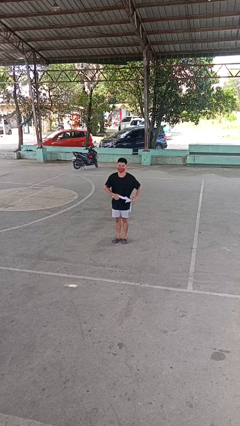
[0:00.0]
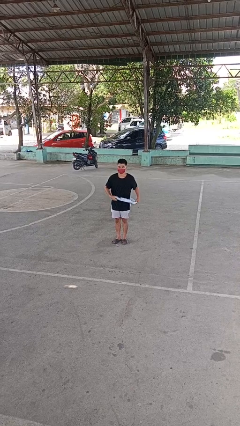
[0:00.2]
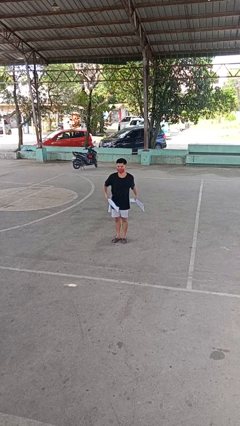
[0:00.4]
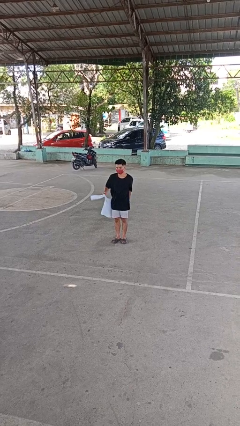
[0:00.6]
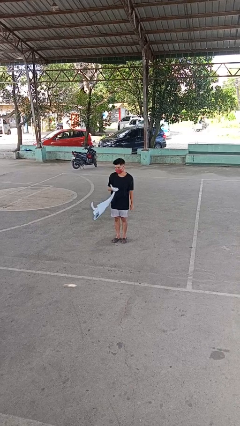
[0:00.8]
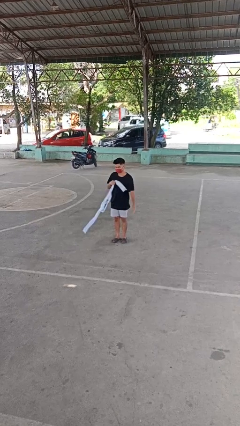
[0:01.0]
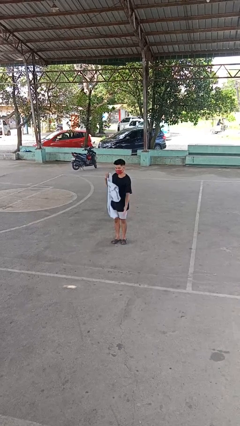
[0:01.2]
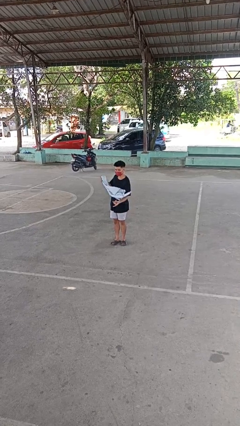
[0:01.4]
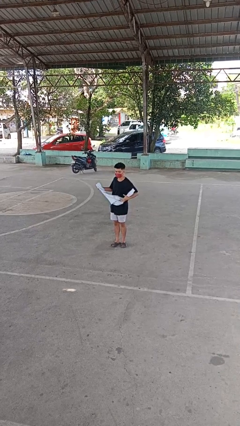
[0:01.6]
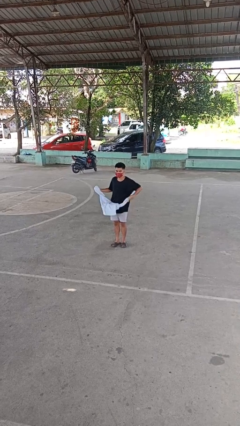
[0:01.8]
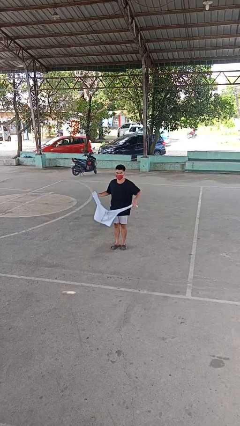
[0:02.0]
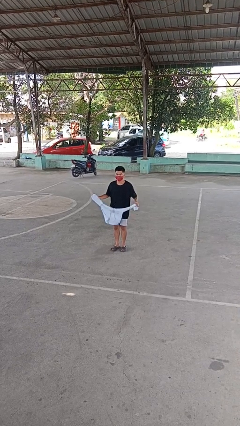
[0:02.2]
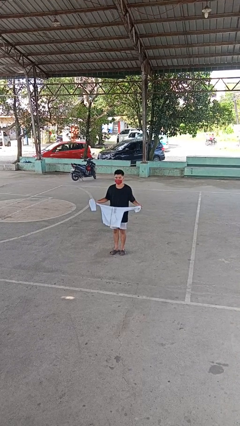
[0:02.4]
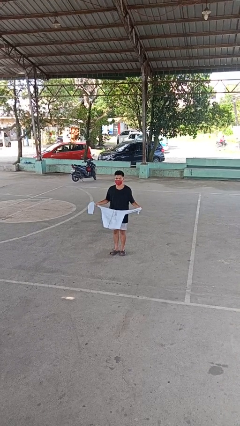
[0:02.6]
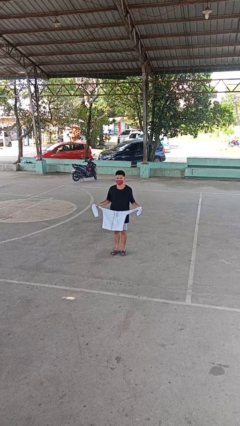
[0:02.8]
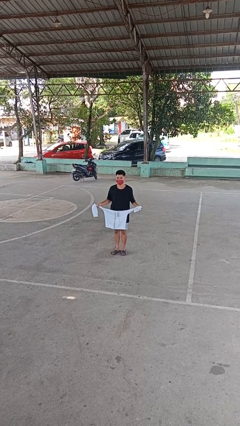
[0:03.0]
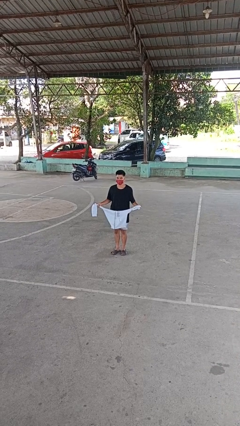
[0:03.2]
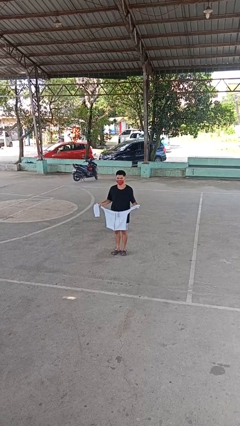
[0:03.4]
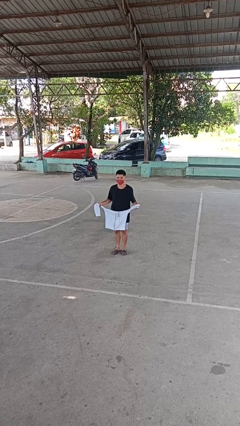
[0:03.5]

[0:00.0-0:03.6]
person unties jacket around waist

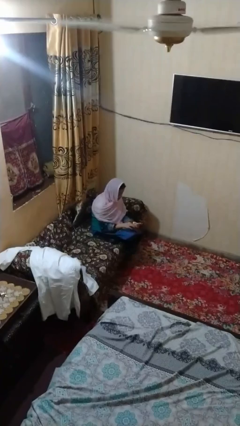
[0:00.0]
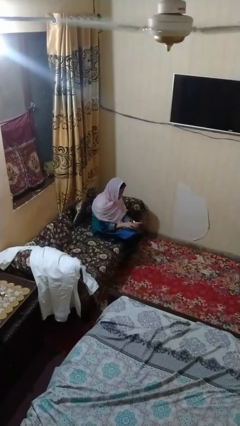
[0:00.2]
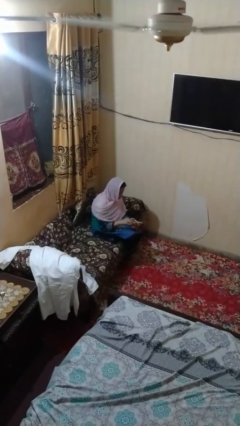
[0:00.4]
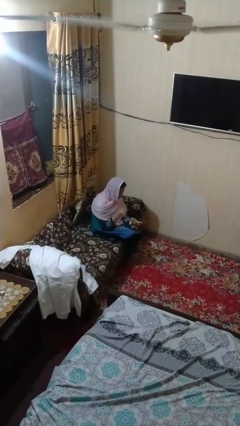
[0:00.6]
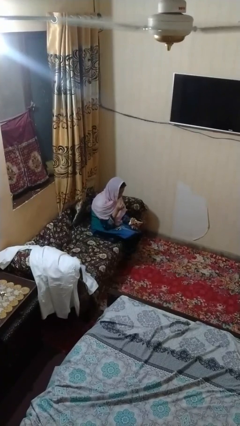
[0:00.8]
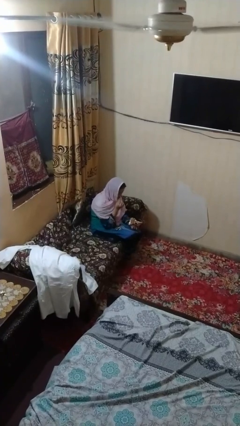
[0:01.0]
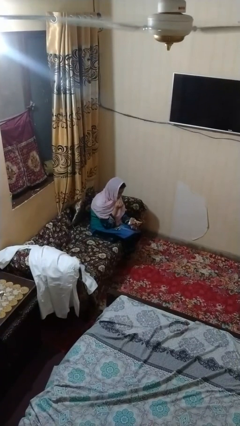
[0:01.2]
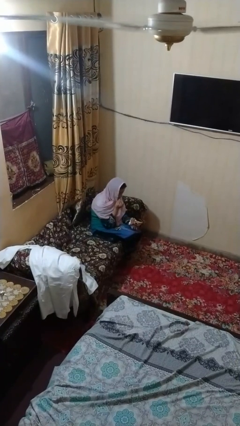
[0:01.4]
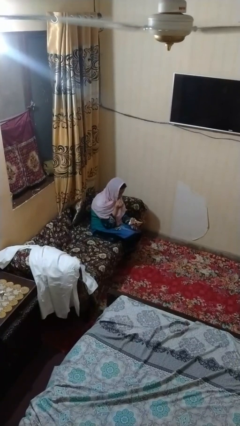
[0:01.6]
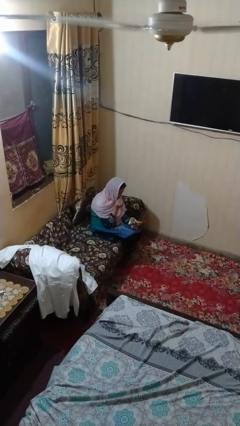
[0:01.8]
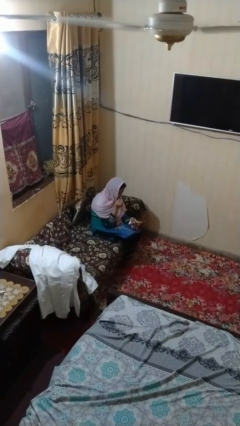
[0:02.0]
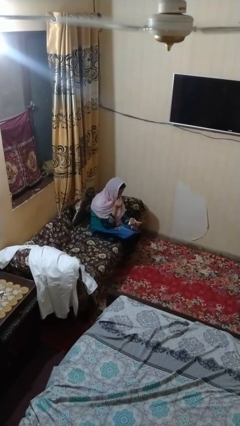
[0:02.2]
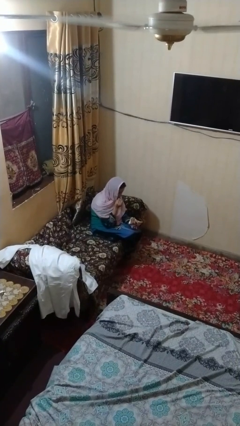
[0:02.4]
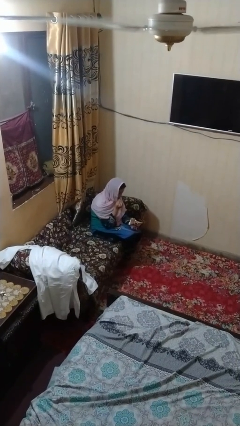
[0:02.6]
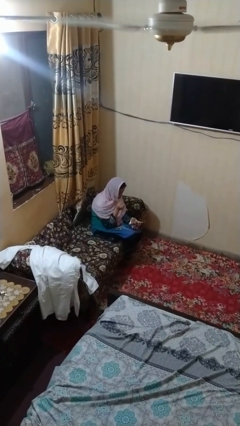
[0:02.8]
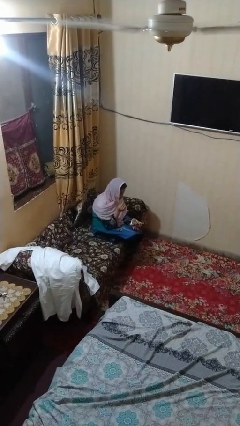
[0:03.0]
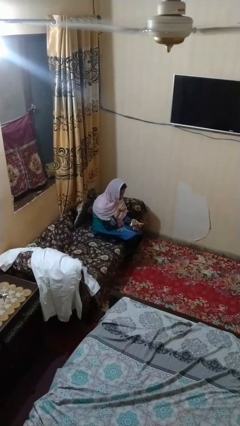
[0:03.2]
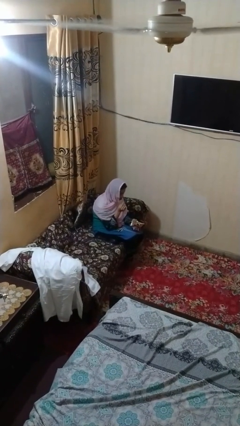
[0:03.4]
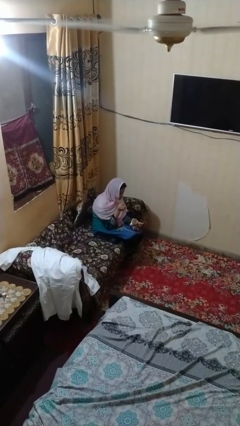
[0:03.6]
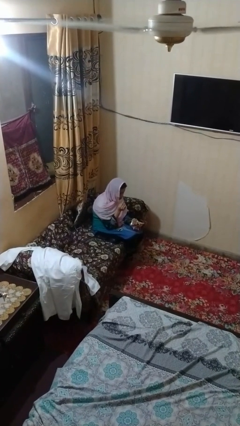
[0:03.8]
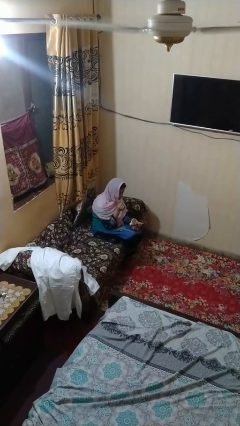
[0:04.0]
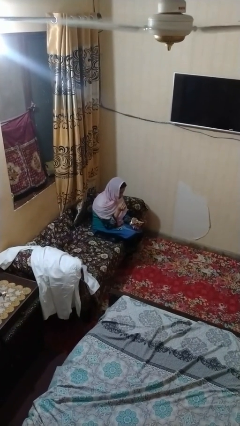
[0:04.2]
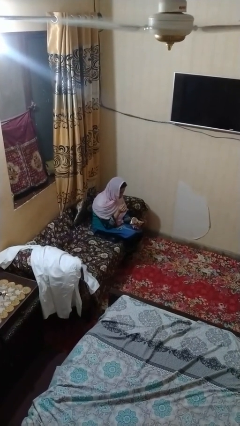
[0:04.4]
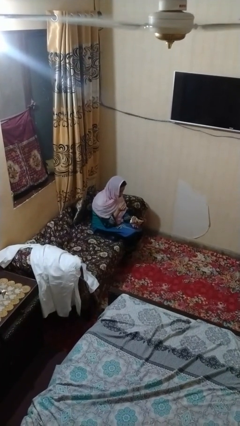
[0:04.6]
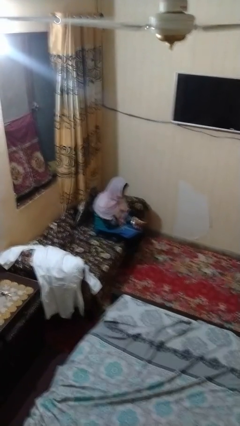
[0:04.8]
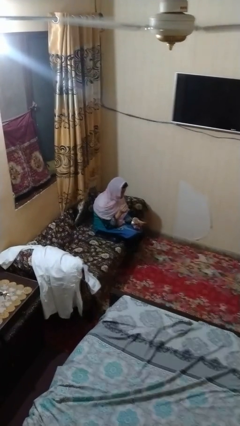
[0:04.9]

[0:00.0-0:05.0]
person eats snack from bag

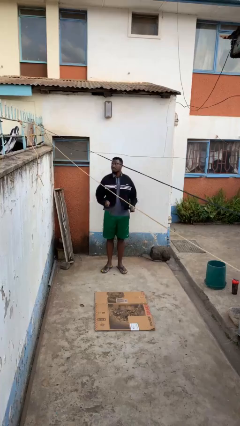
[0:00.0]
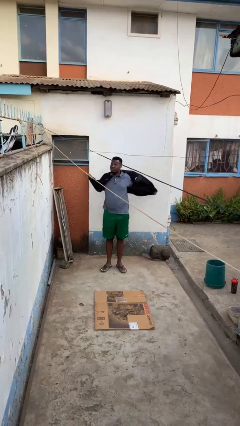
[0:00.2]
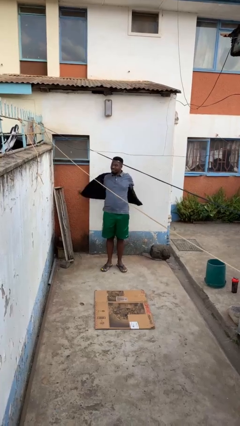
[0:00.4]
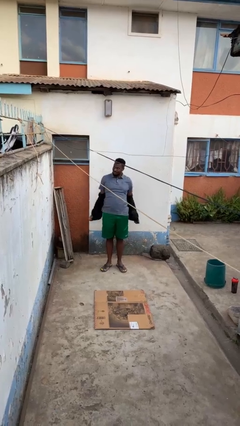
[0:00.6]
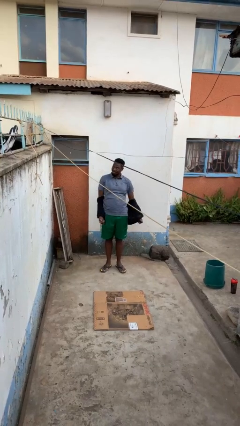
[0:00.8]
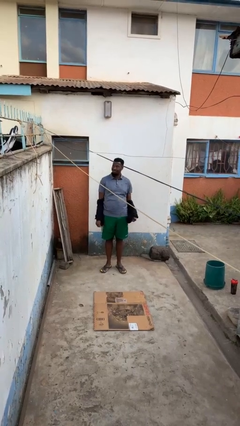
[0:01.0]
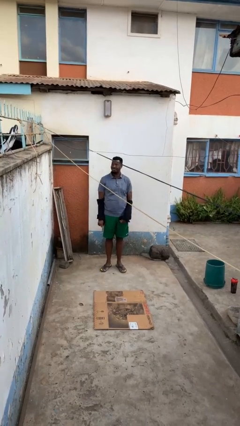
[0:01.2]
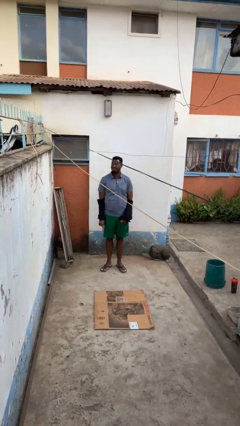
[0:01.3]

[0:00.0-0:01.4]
person takes off jacket

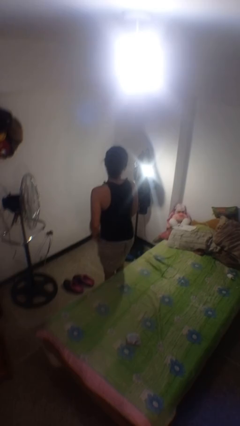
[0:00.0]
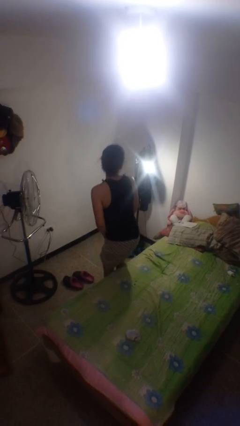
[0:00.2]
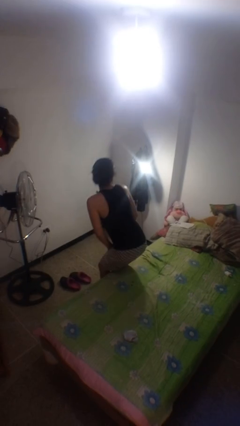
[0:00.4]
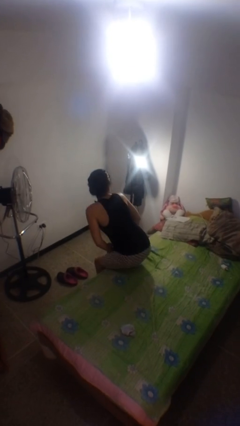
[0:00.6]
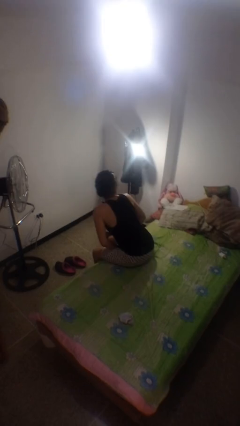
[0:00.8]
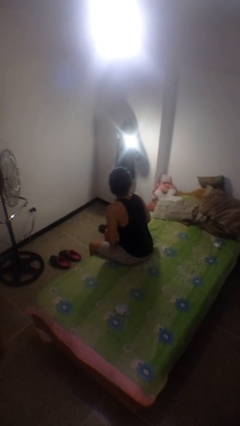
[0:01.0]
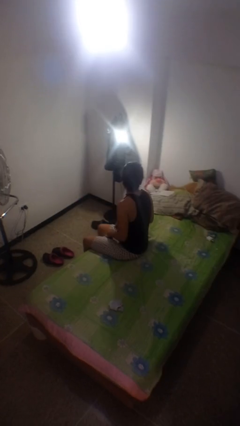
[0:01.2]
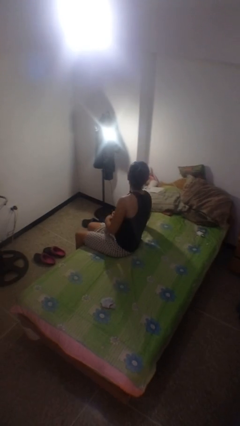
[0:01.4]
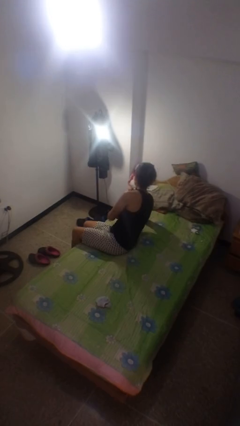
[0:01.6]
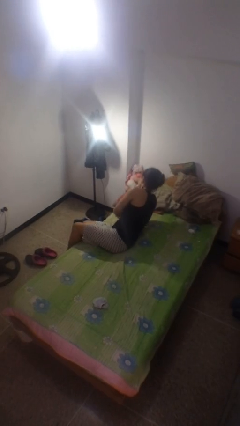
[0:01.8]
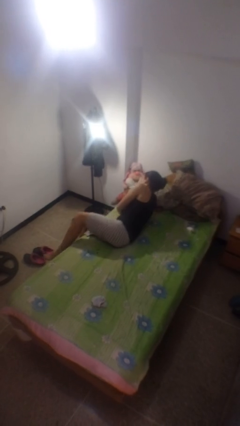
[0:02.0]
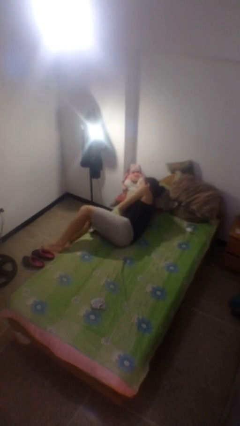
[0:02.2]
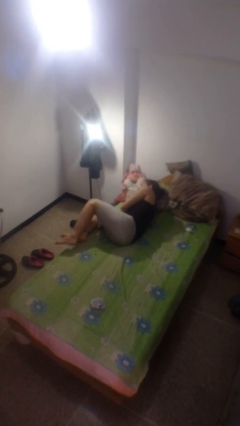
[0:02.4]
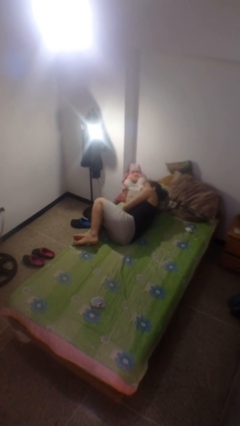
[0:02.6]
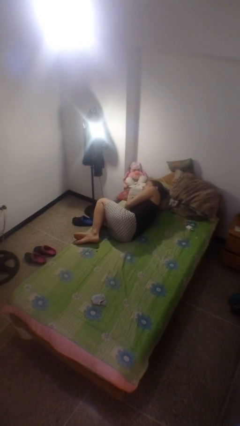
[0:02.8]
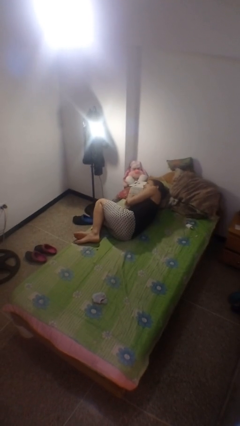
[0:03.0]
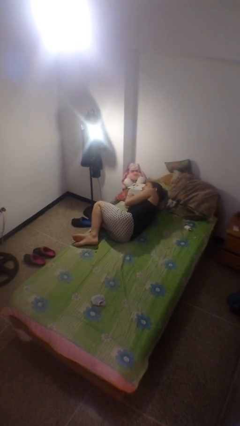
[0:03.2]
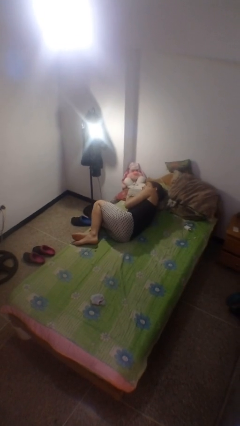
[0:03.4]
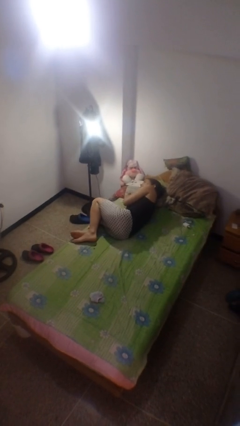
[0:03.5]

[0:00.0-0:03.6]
person lies down on bed

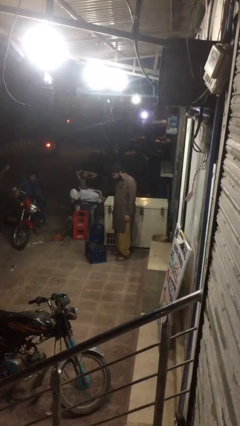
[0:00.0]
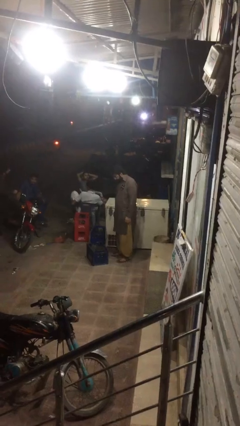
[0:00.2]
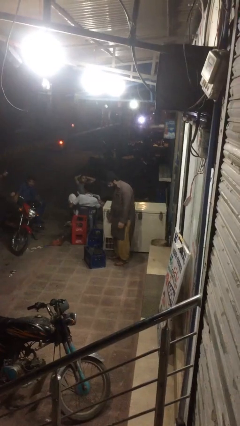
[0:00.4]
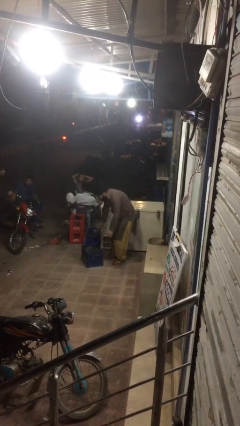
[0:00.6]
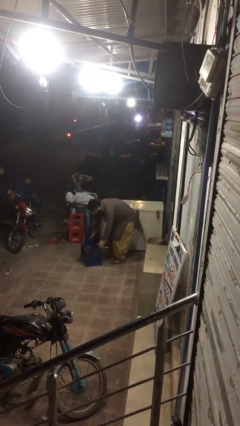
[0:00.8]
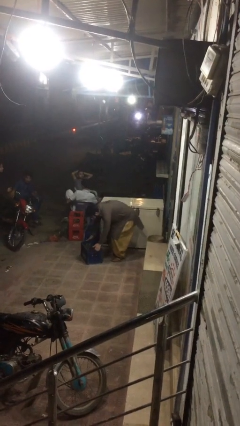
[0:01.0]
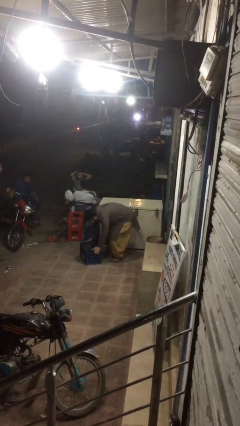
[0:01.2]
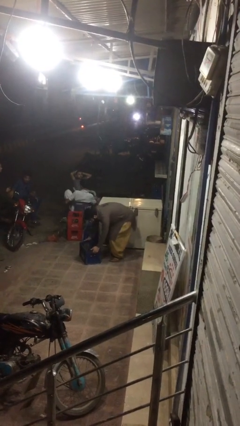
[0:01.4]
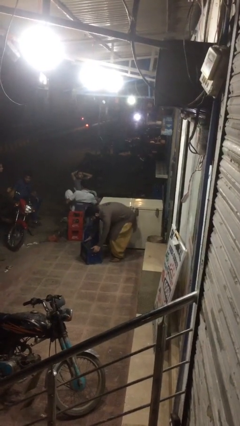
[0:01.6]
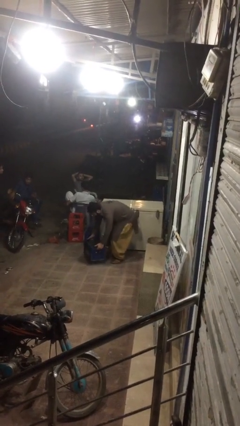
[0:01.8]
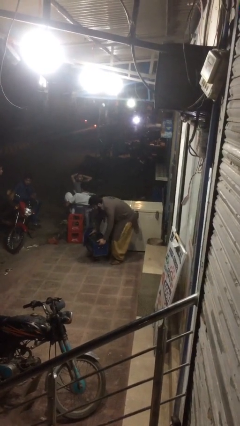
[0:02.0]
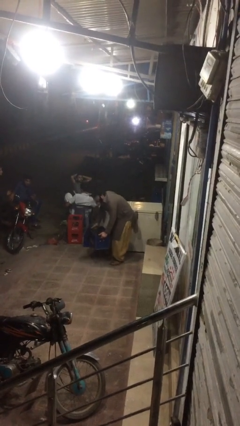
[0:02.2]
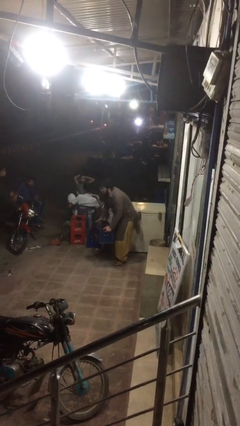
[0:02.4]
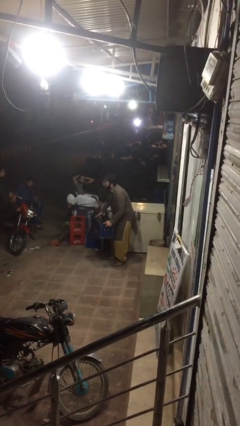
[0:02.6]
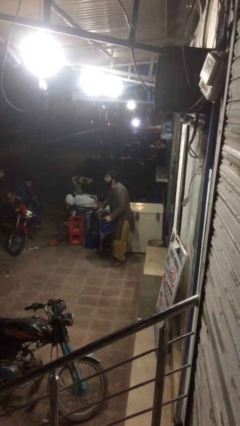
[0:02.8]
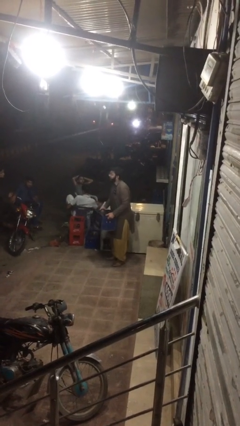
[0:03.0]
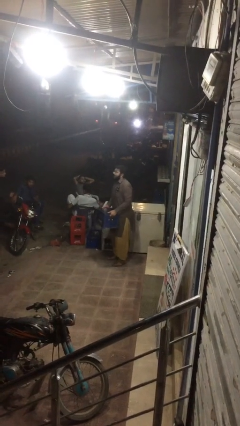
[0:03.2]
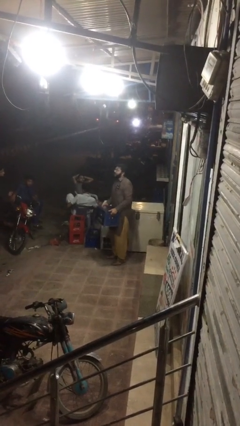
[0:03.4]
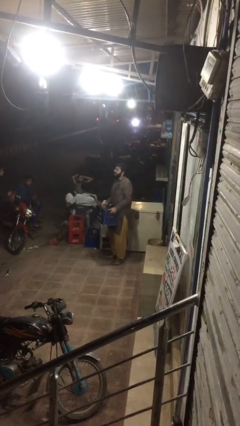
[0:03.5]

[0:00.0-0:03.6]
person picks up object from floor

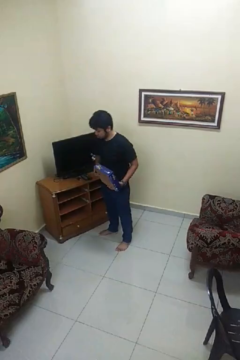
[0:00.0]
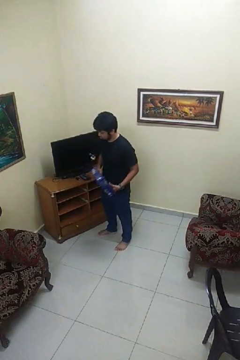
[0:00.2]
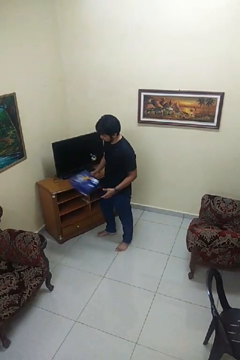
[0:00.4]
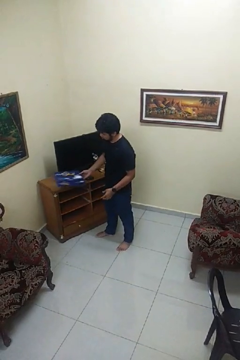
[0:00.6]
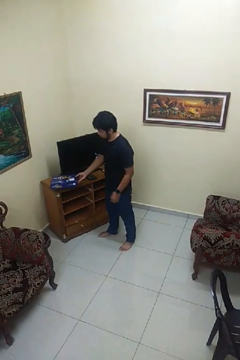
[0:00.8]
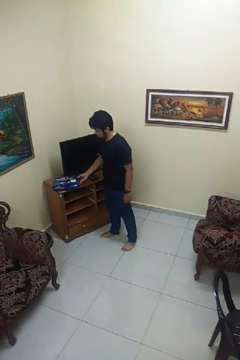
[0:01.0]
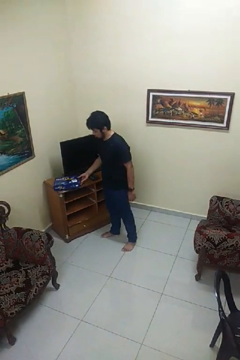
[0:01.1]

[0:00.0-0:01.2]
person puts down object on countertop
